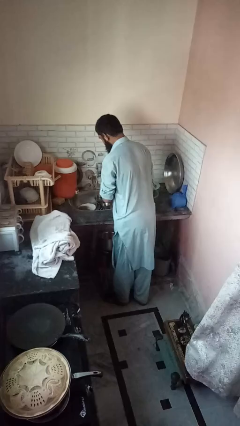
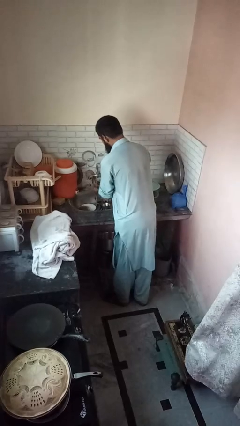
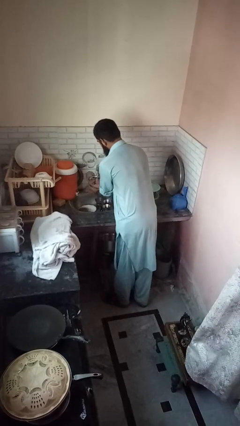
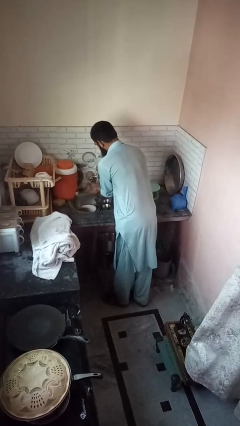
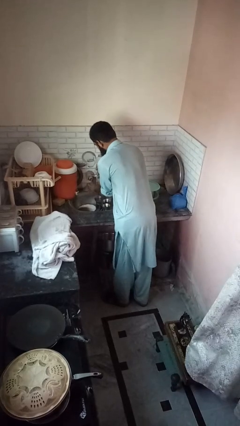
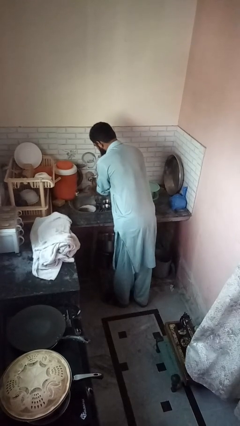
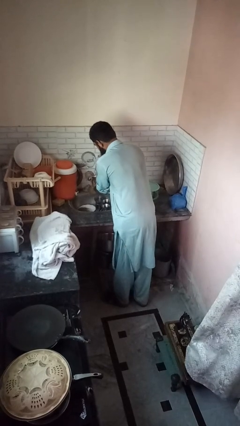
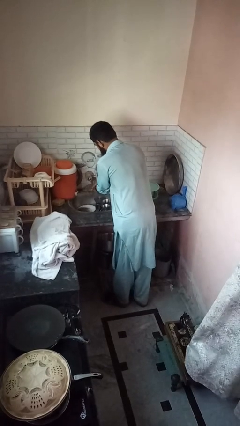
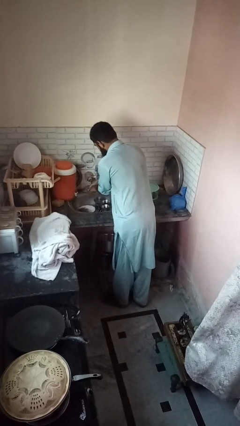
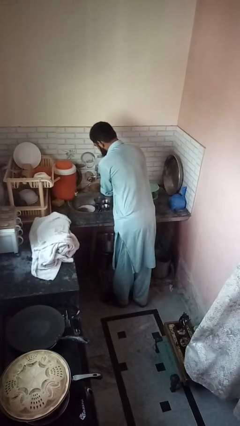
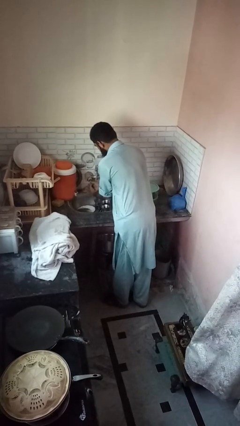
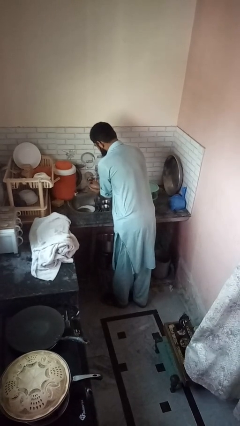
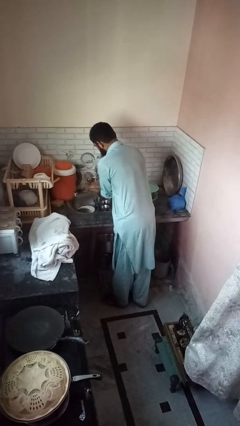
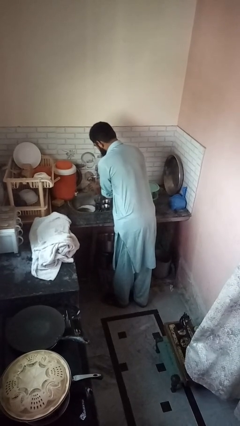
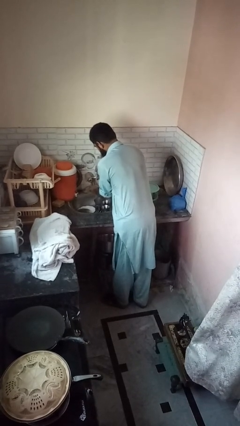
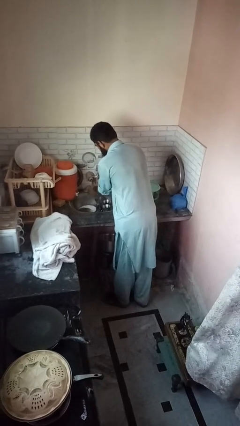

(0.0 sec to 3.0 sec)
person washes hands

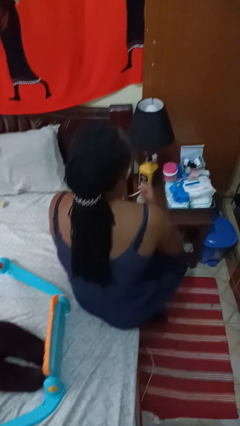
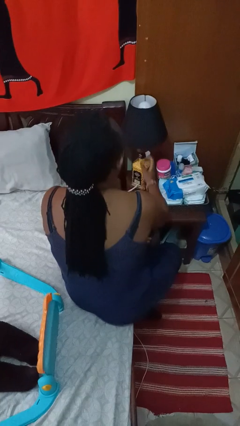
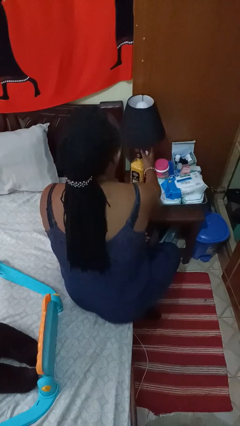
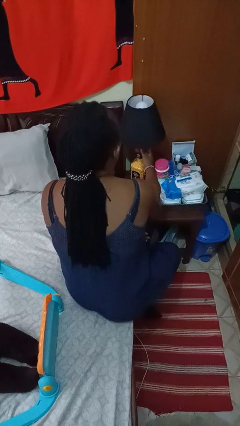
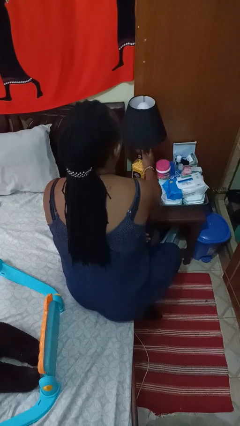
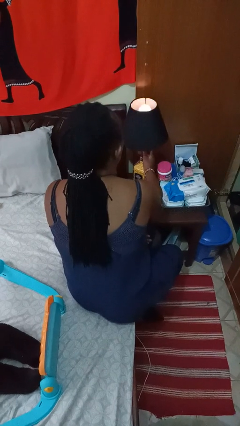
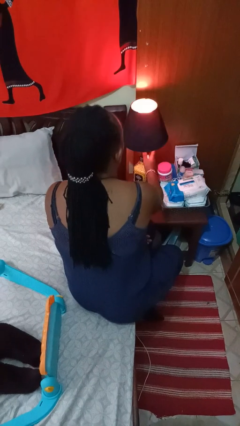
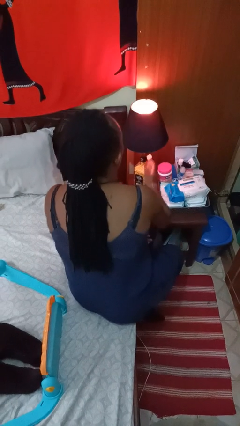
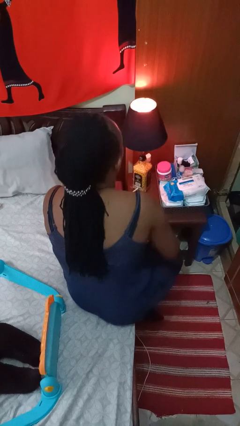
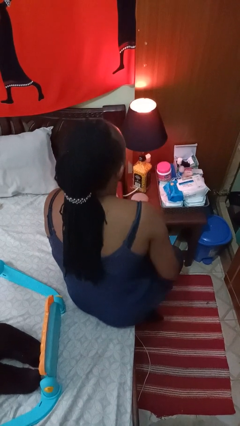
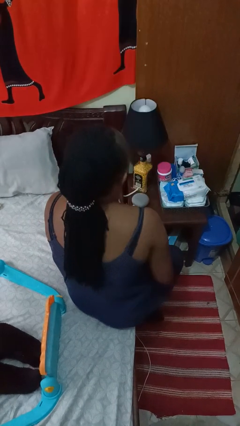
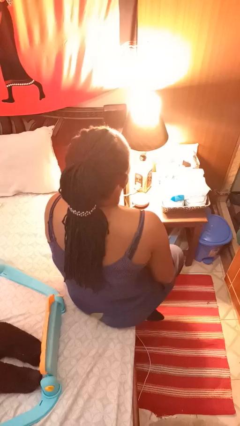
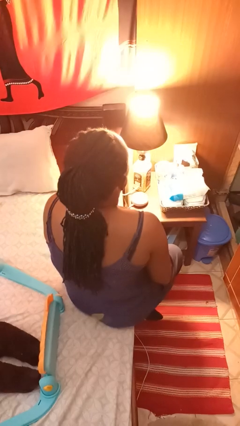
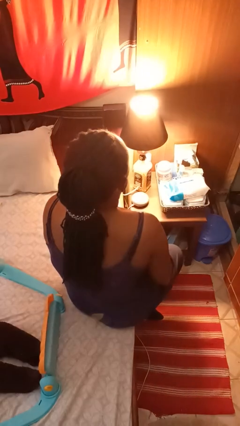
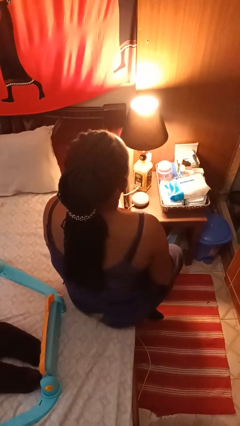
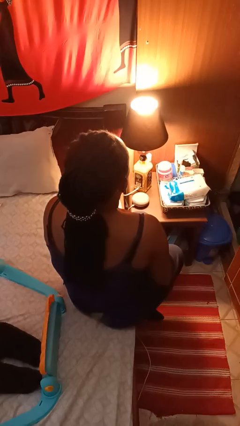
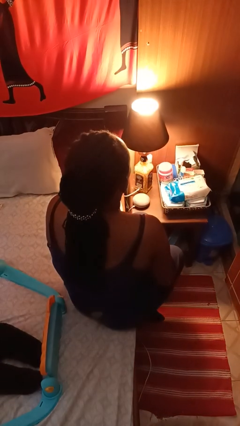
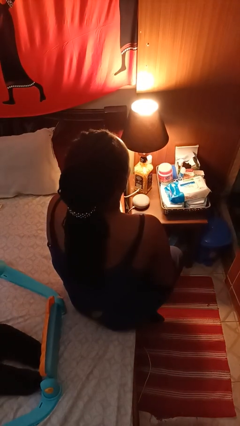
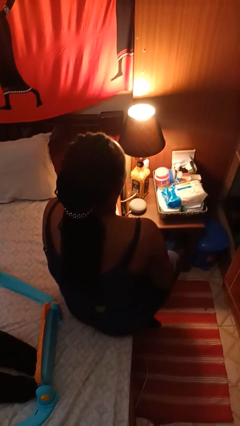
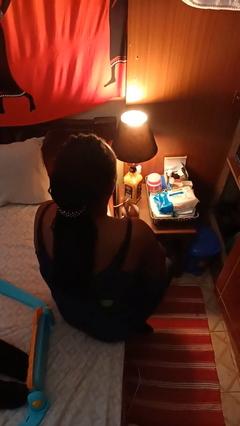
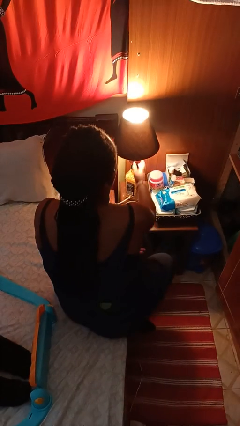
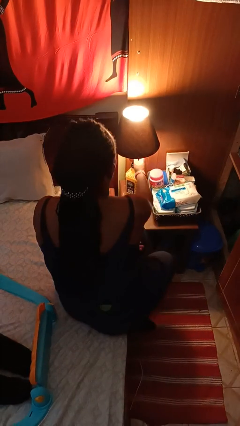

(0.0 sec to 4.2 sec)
person turns on lamp

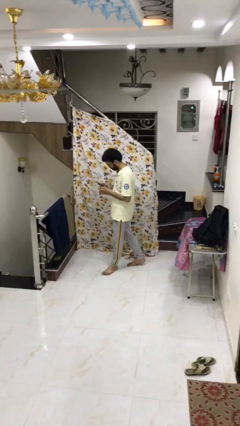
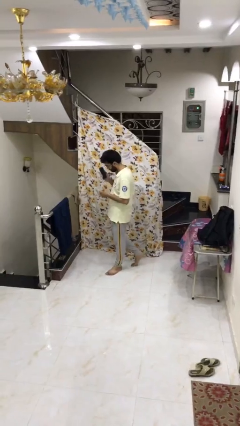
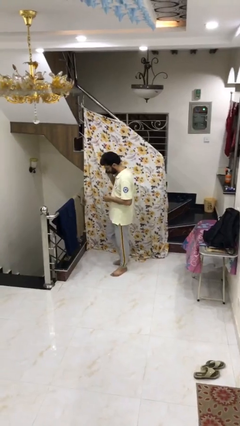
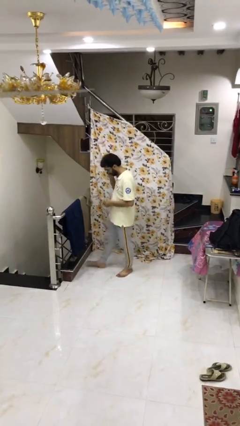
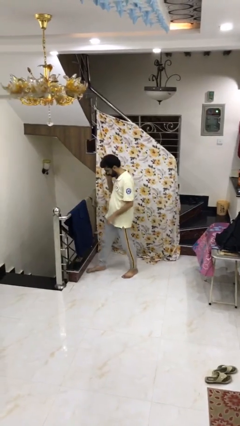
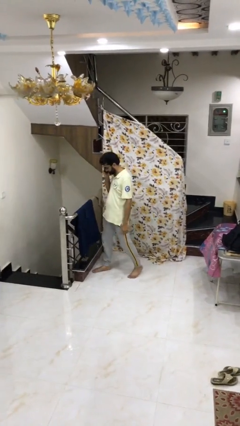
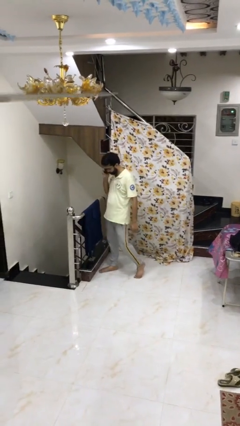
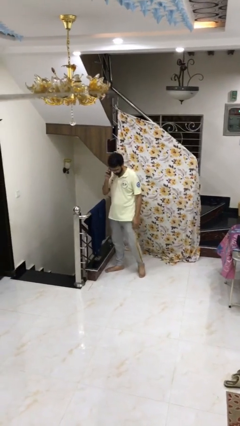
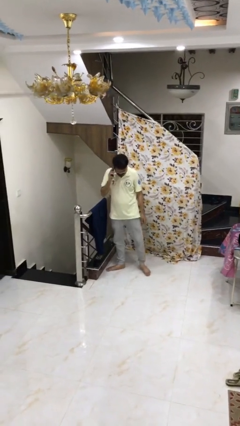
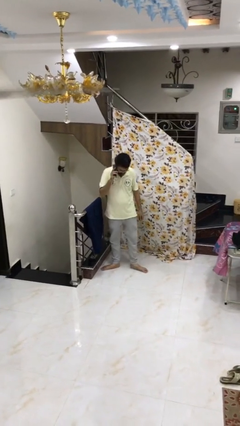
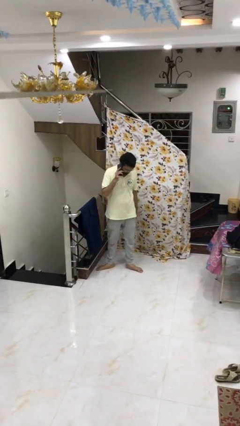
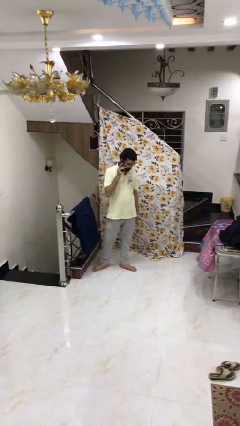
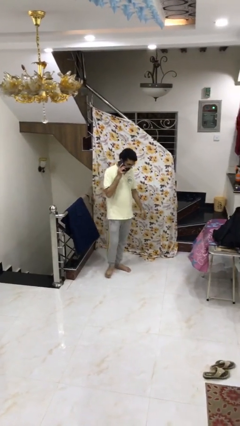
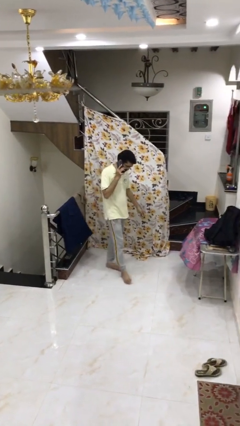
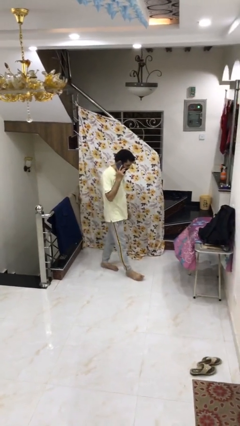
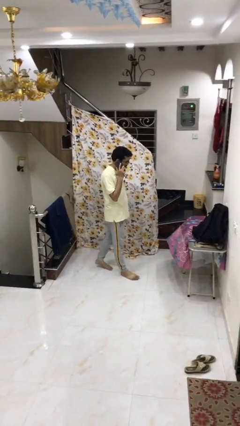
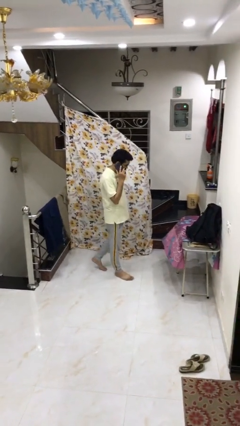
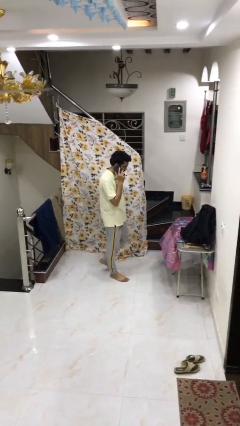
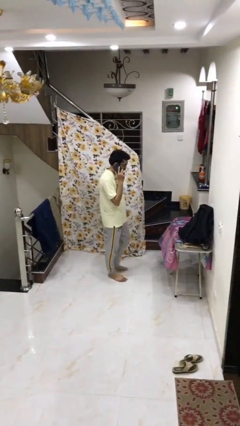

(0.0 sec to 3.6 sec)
person talks on phone

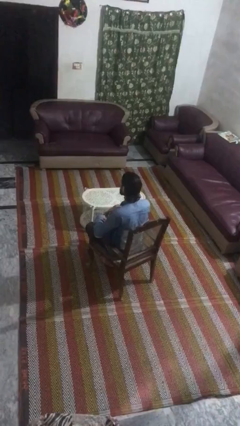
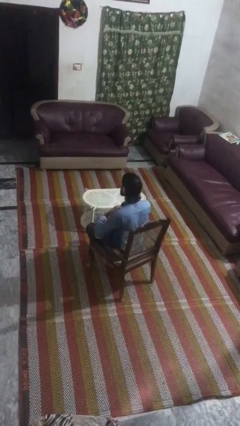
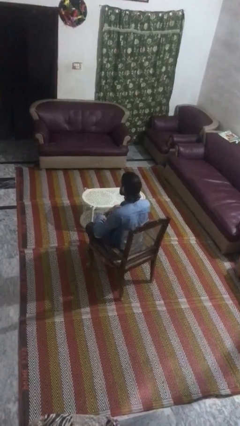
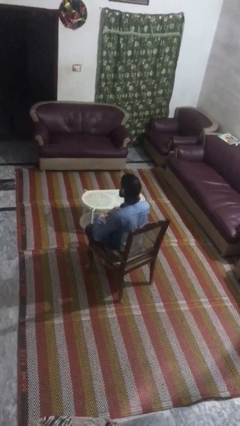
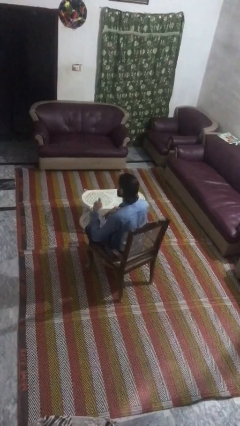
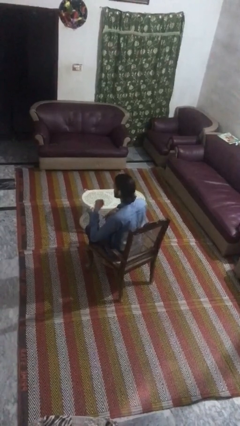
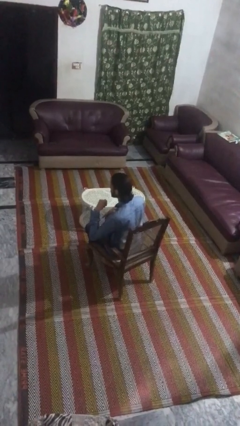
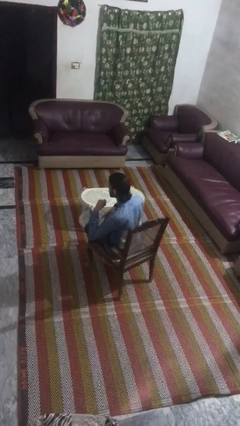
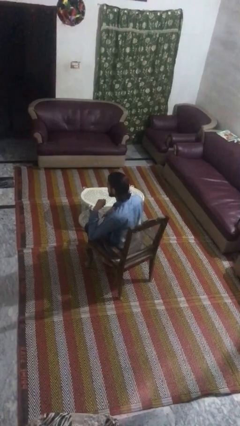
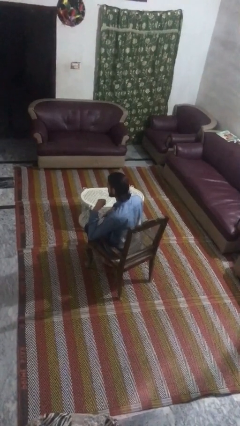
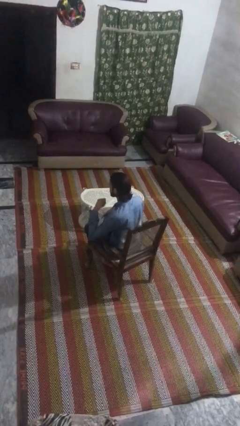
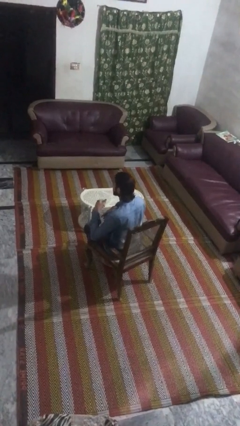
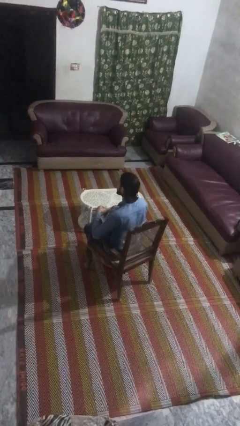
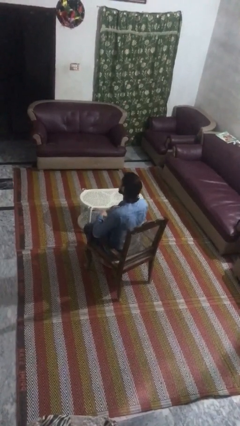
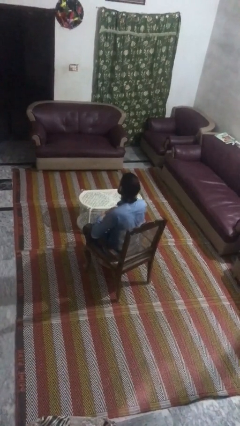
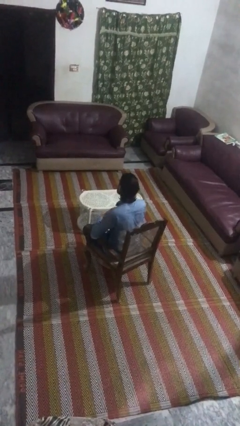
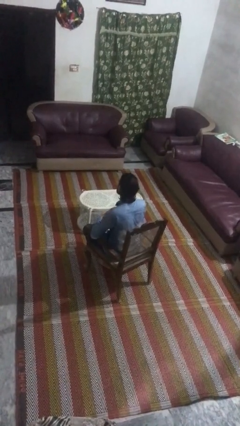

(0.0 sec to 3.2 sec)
person gestures call me

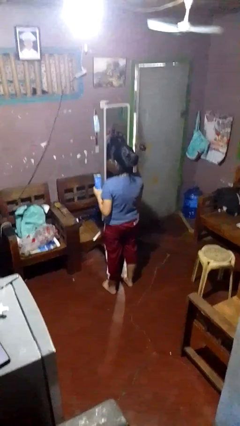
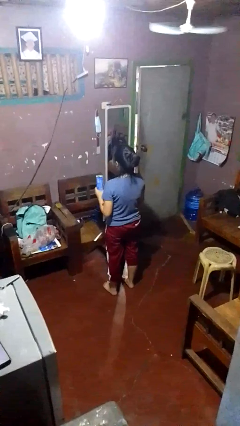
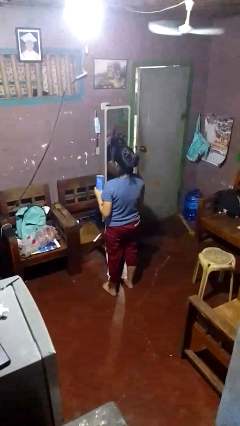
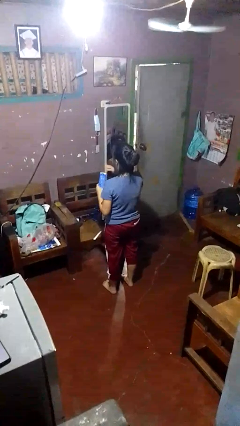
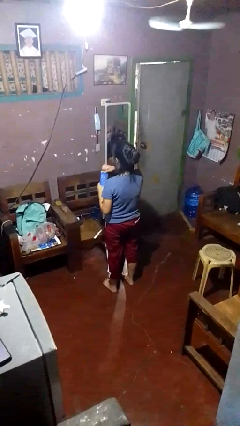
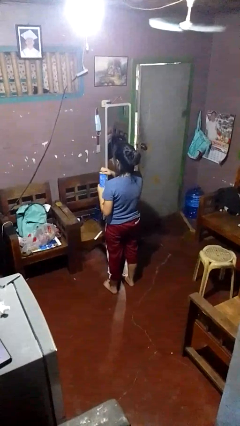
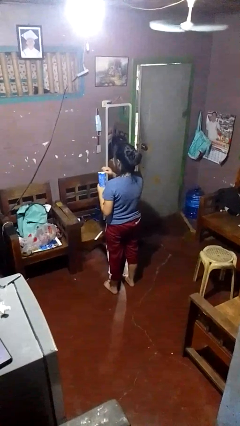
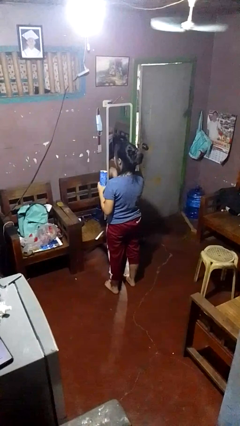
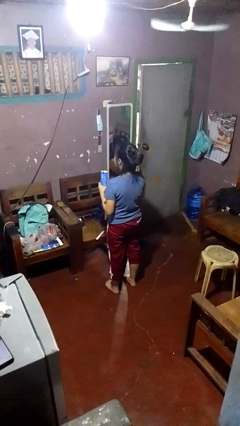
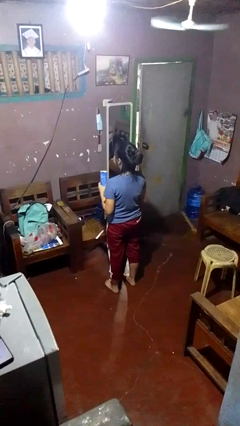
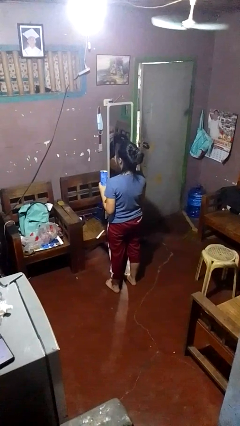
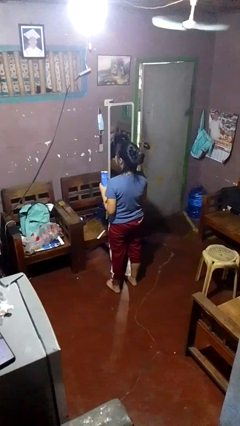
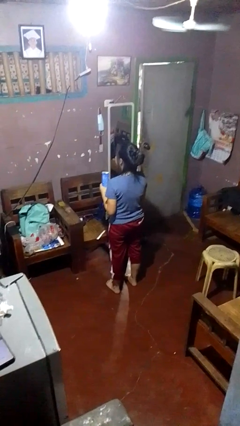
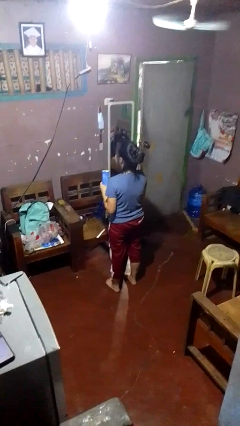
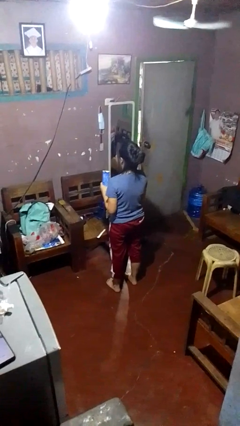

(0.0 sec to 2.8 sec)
person opens beverage can

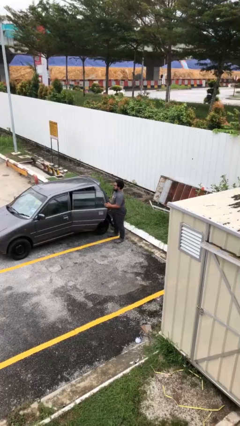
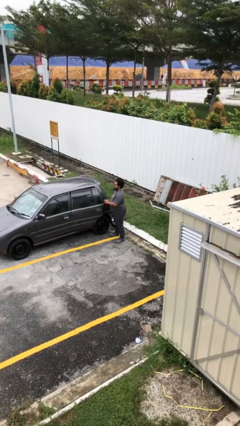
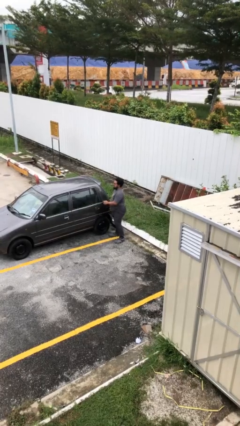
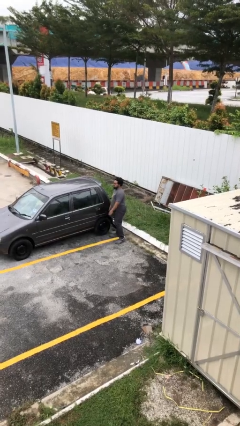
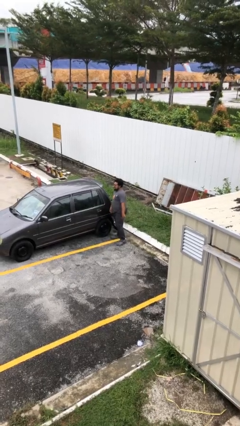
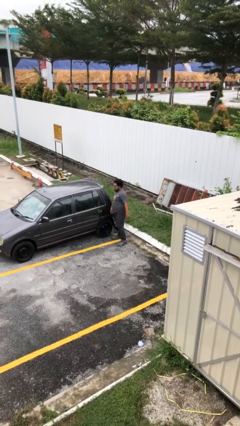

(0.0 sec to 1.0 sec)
person closes car door
